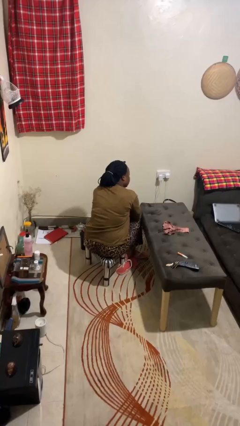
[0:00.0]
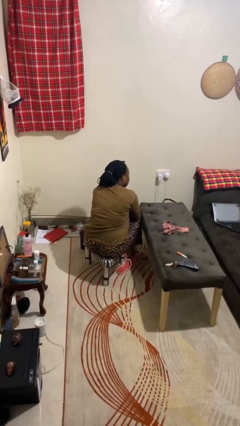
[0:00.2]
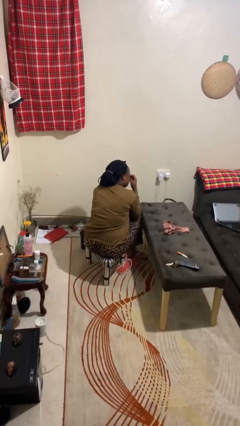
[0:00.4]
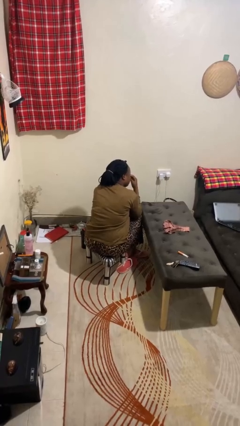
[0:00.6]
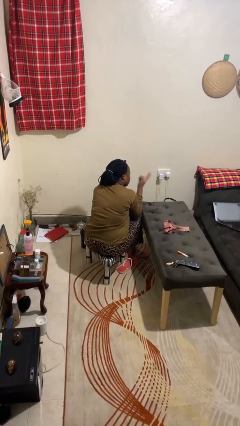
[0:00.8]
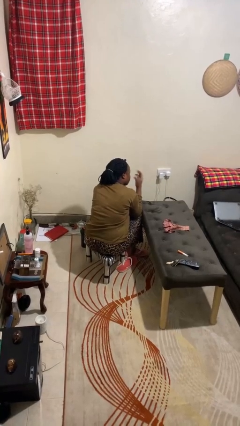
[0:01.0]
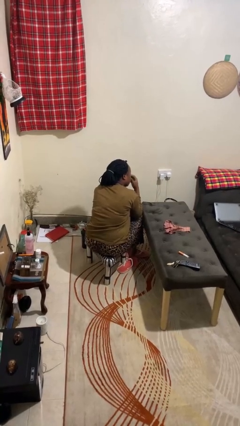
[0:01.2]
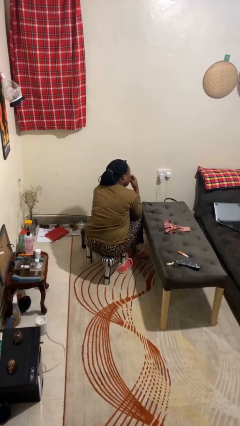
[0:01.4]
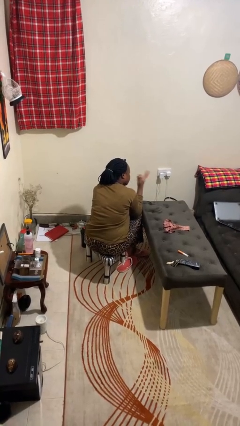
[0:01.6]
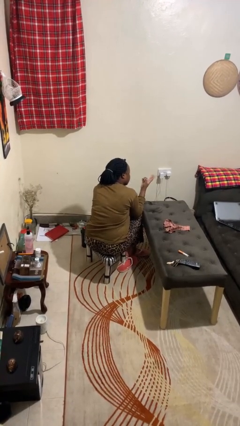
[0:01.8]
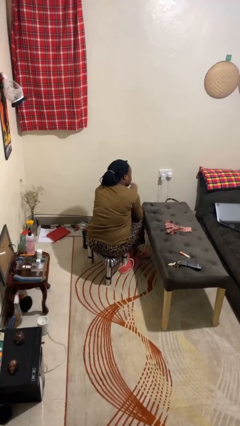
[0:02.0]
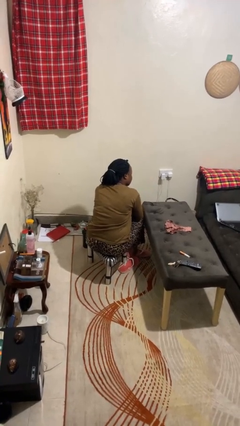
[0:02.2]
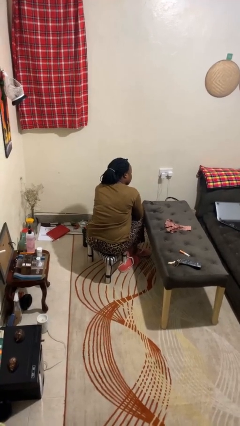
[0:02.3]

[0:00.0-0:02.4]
person gestures watch closely

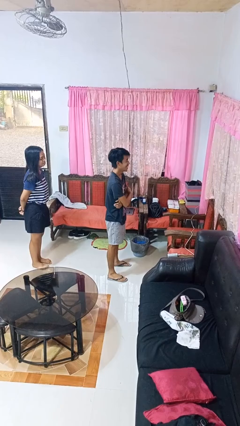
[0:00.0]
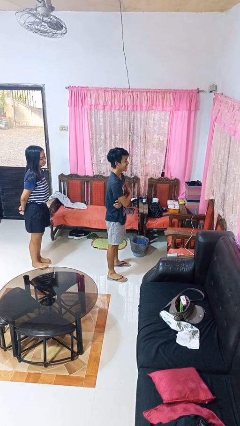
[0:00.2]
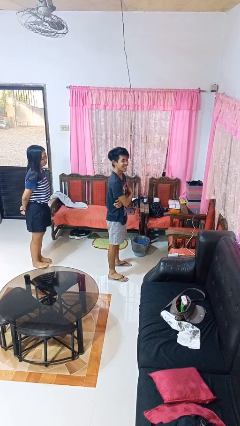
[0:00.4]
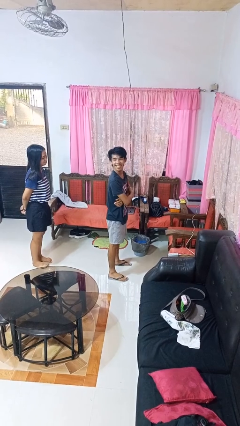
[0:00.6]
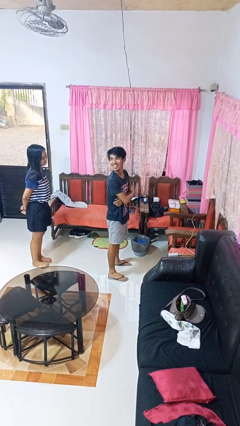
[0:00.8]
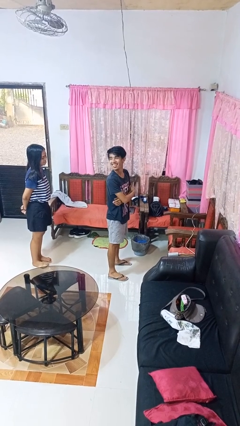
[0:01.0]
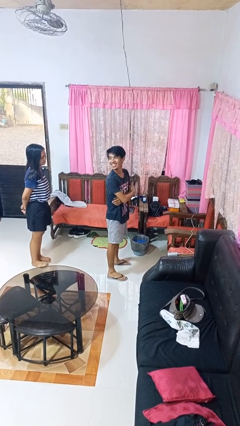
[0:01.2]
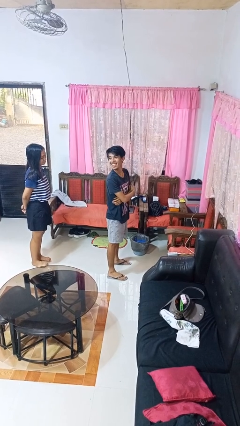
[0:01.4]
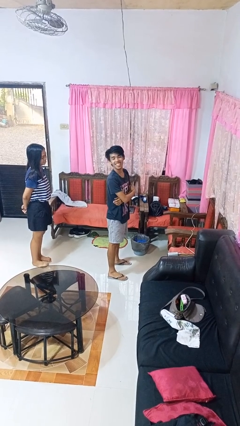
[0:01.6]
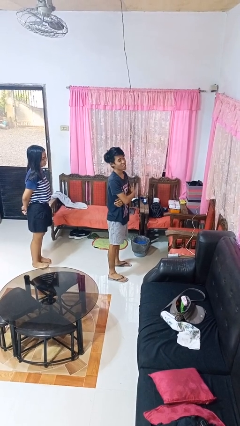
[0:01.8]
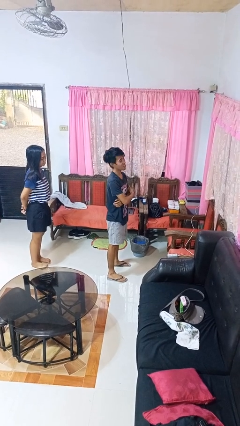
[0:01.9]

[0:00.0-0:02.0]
person looks over shoulder

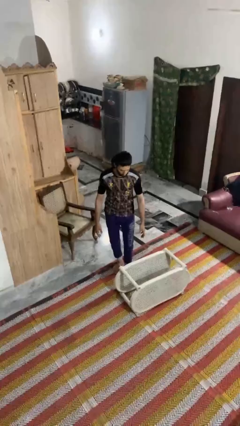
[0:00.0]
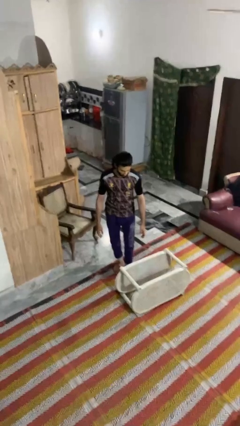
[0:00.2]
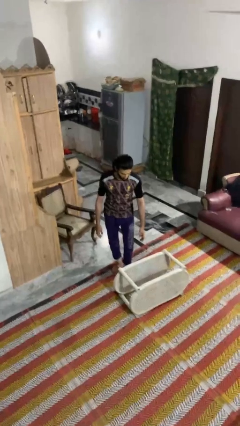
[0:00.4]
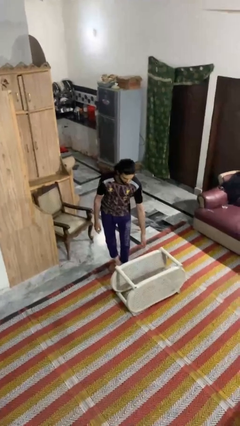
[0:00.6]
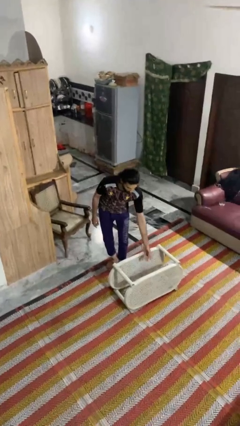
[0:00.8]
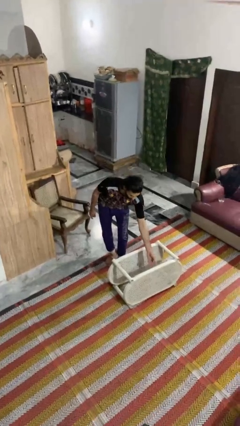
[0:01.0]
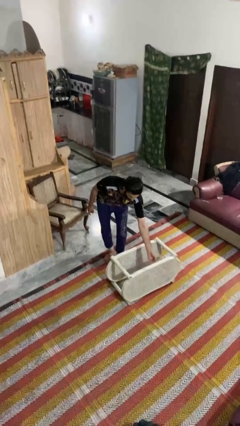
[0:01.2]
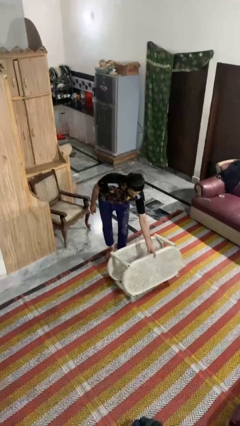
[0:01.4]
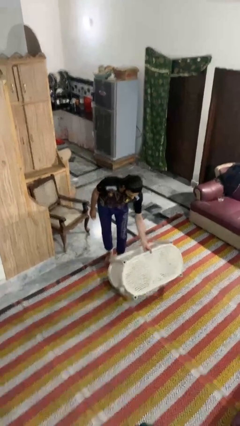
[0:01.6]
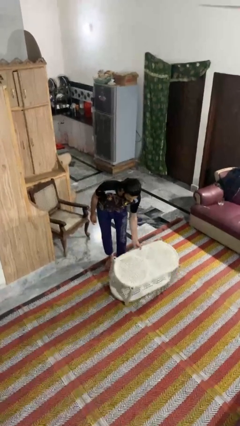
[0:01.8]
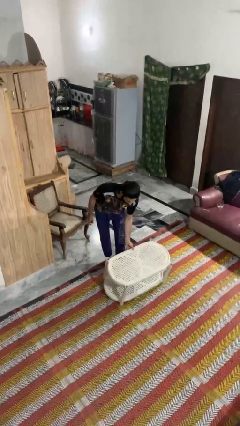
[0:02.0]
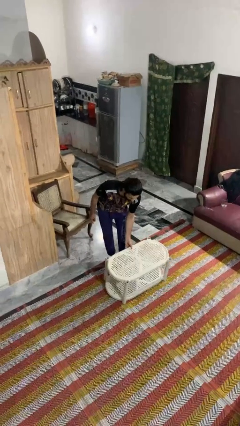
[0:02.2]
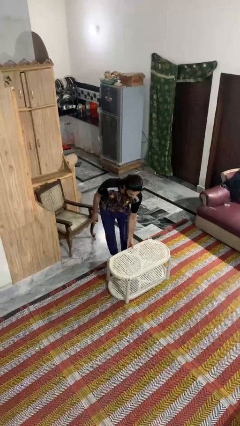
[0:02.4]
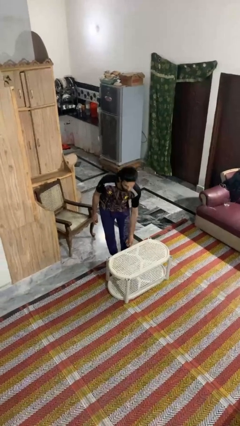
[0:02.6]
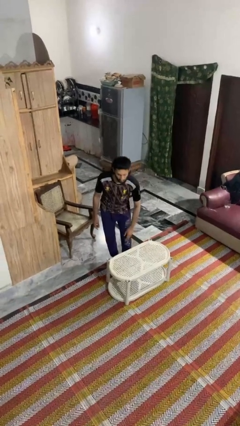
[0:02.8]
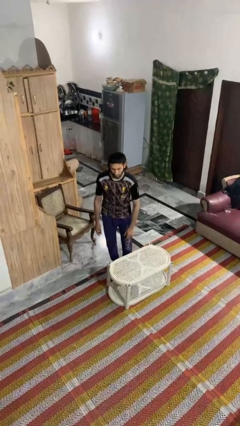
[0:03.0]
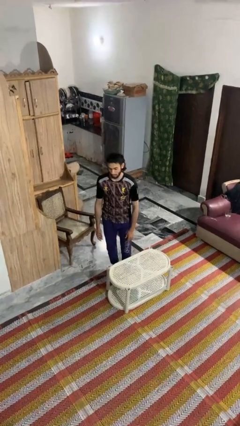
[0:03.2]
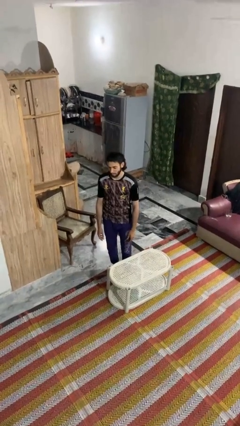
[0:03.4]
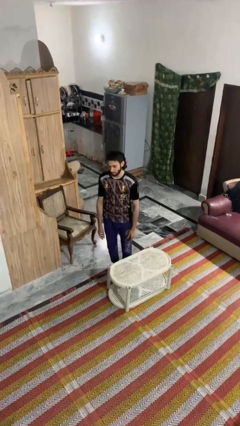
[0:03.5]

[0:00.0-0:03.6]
person sets upright furniture

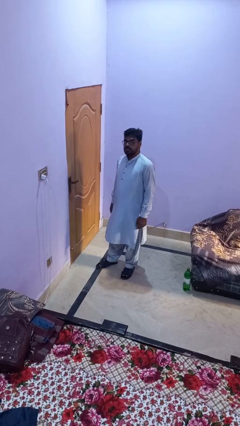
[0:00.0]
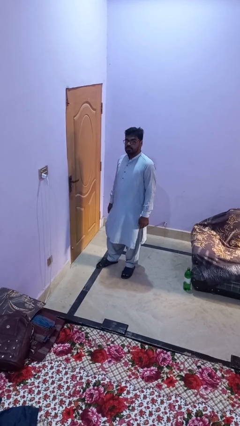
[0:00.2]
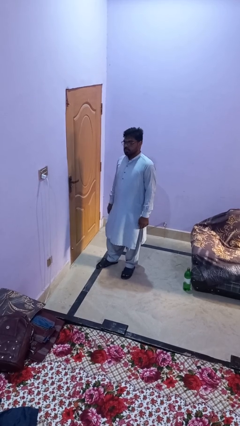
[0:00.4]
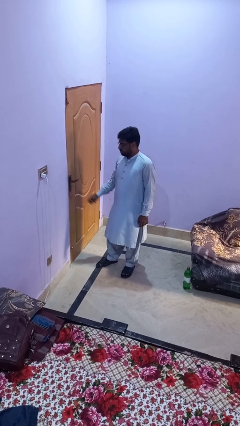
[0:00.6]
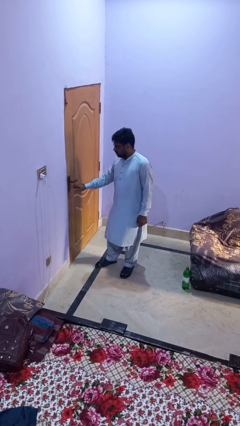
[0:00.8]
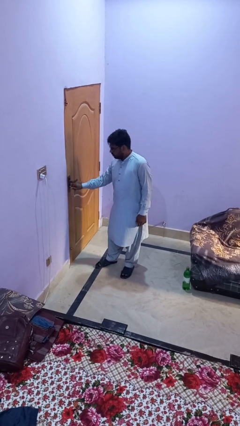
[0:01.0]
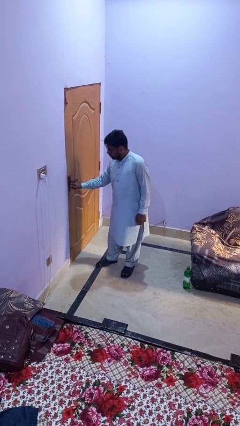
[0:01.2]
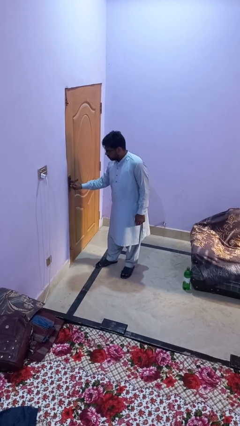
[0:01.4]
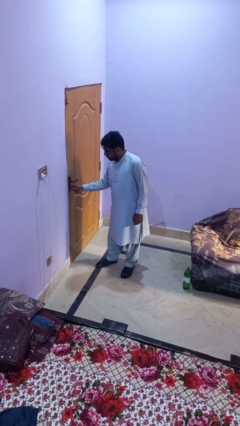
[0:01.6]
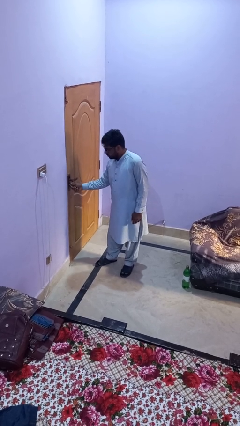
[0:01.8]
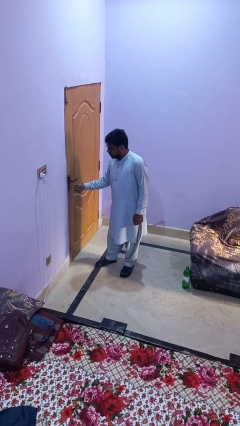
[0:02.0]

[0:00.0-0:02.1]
person unlocks door with keys

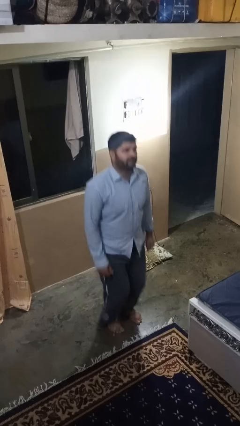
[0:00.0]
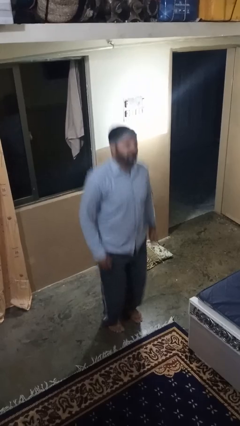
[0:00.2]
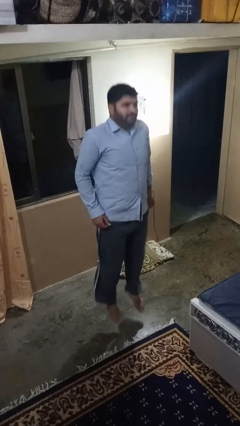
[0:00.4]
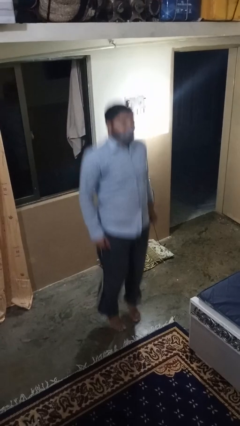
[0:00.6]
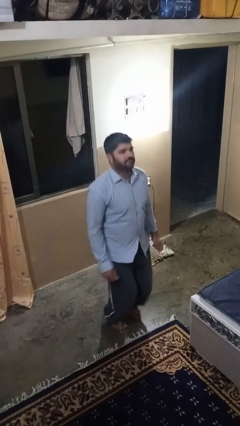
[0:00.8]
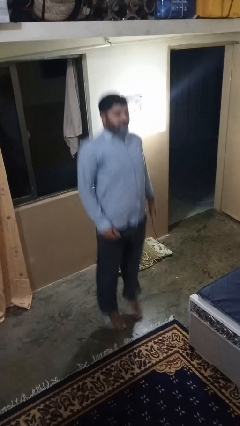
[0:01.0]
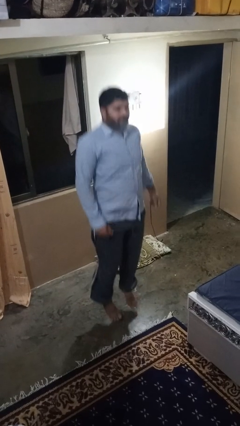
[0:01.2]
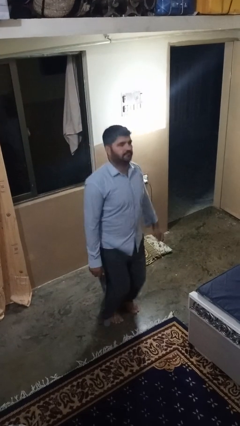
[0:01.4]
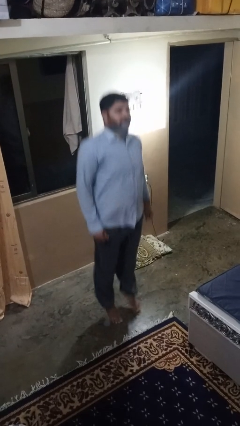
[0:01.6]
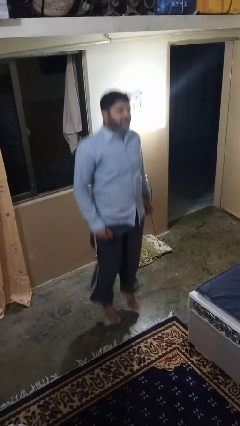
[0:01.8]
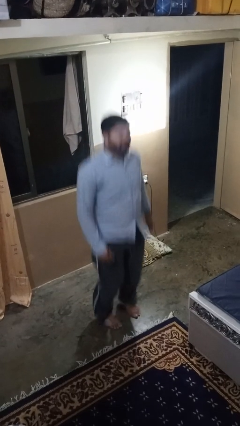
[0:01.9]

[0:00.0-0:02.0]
person jumps

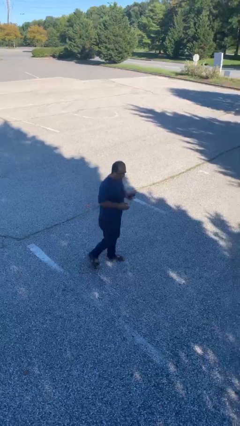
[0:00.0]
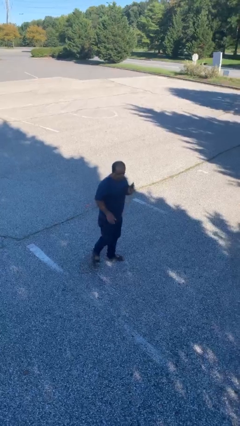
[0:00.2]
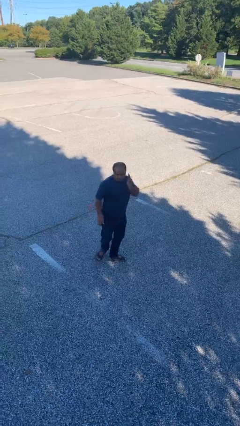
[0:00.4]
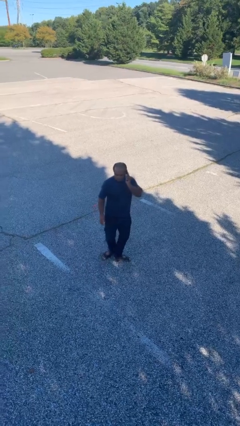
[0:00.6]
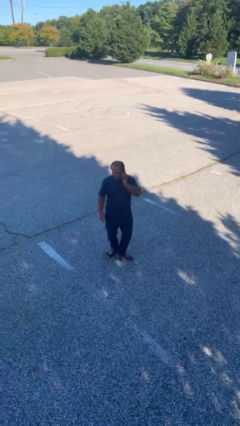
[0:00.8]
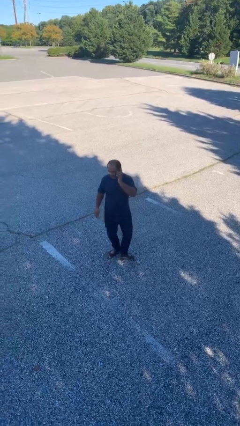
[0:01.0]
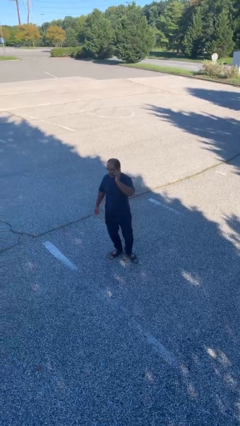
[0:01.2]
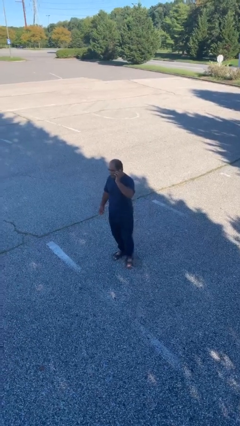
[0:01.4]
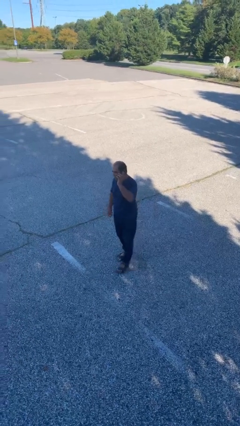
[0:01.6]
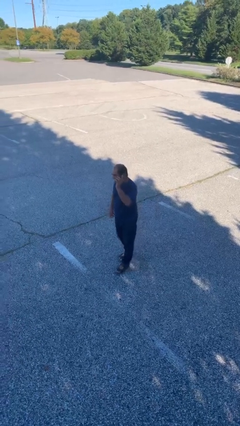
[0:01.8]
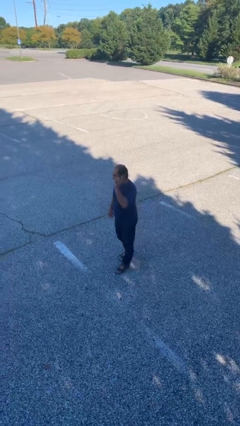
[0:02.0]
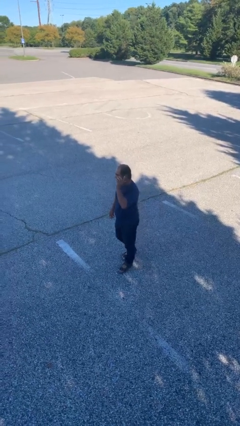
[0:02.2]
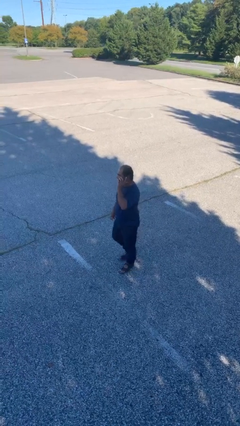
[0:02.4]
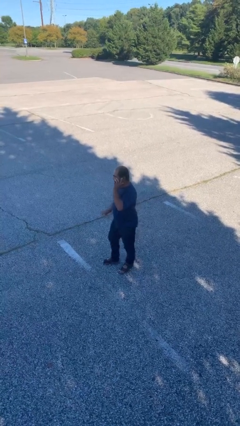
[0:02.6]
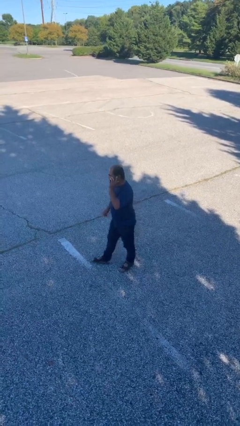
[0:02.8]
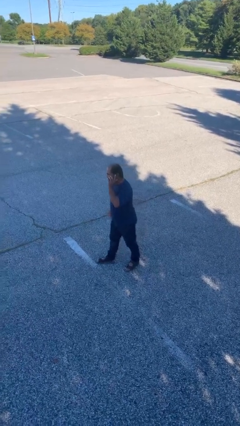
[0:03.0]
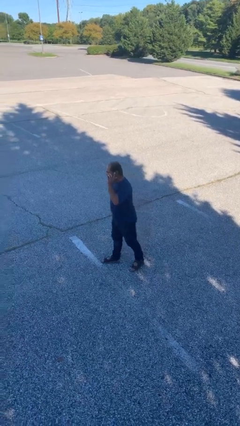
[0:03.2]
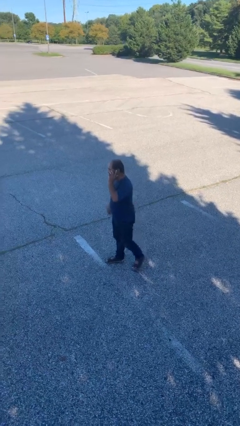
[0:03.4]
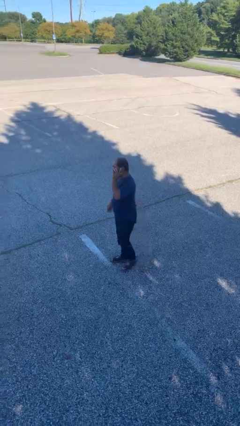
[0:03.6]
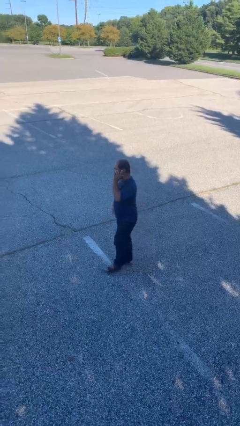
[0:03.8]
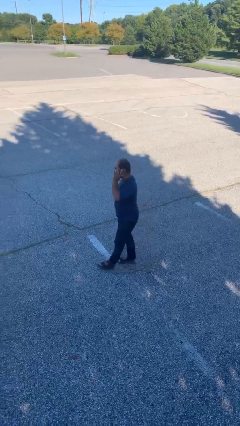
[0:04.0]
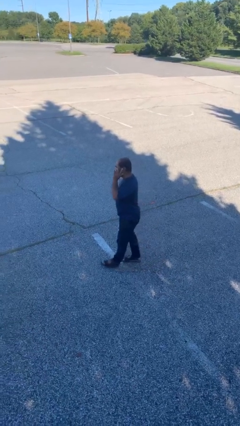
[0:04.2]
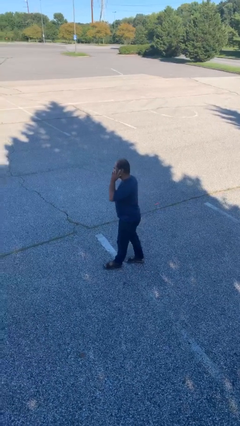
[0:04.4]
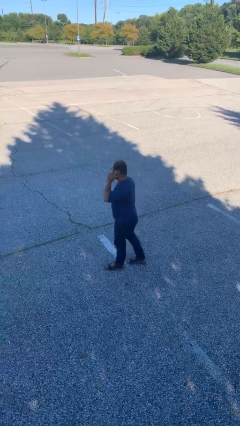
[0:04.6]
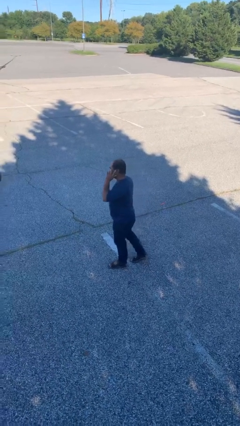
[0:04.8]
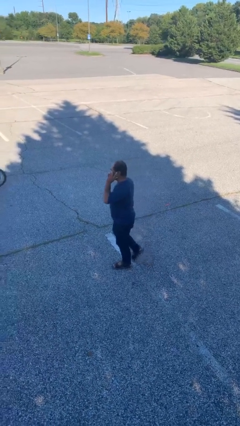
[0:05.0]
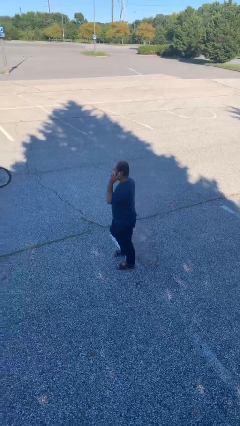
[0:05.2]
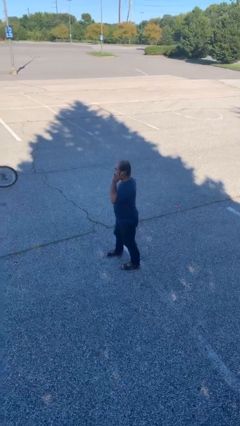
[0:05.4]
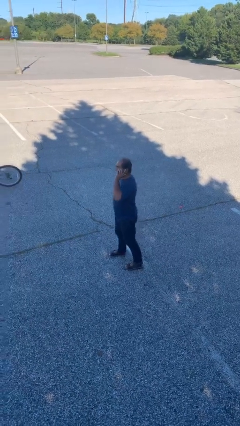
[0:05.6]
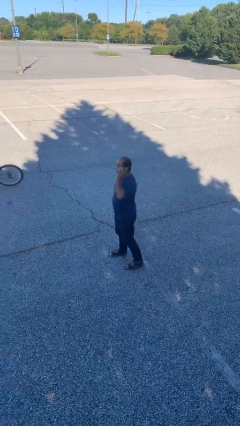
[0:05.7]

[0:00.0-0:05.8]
person talks on phone

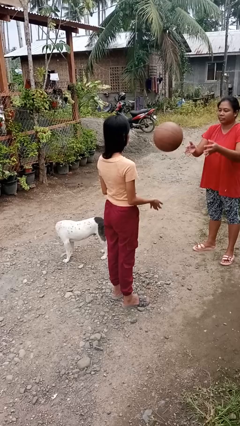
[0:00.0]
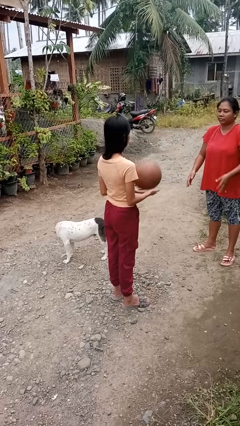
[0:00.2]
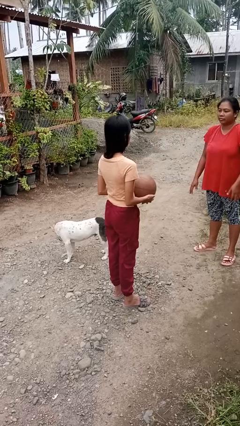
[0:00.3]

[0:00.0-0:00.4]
person catches object from person
